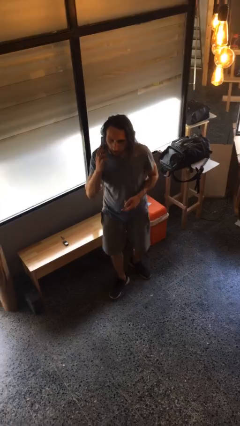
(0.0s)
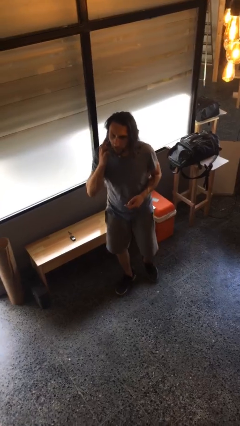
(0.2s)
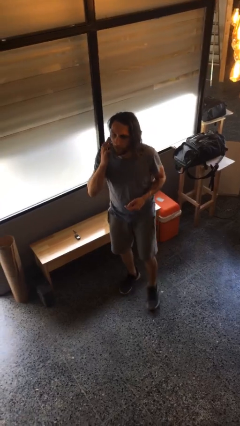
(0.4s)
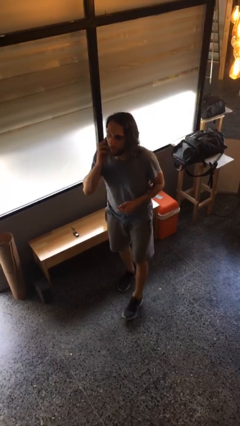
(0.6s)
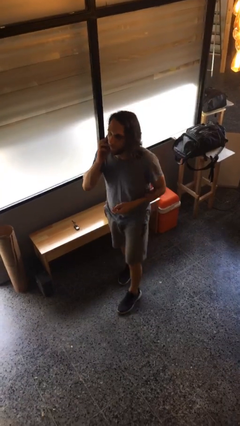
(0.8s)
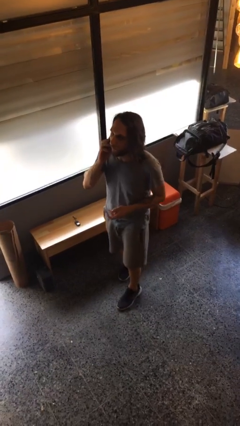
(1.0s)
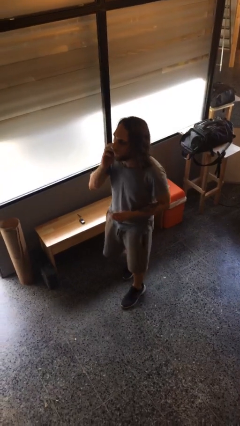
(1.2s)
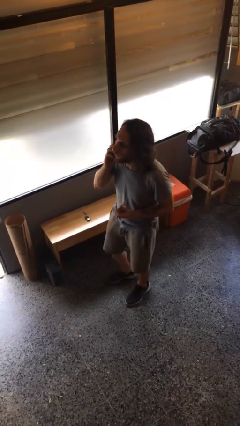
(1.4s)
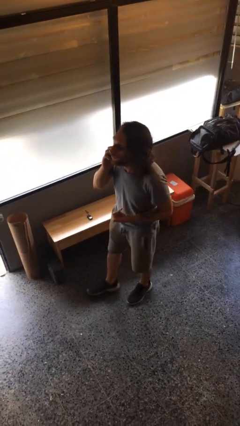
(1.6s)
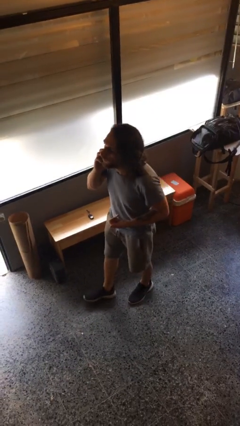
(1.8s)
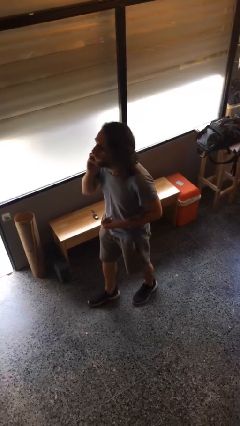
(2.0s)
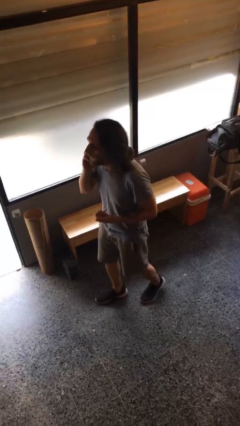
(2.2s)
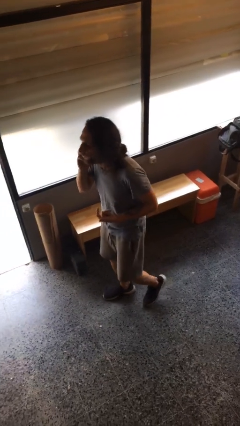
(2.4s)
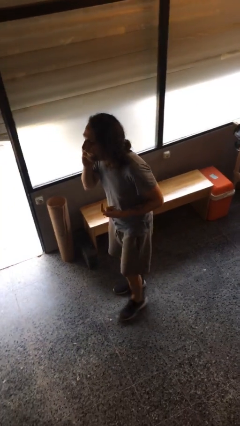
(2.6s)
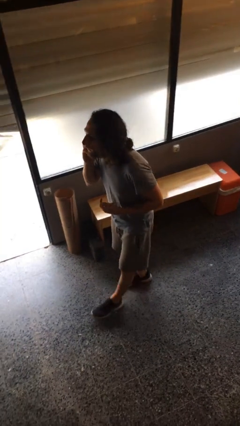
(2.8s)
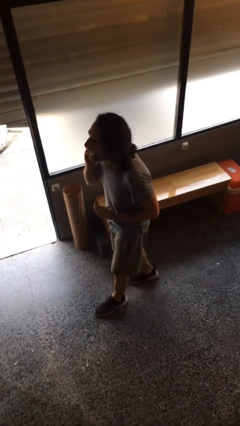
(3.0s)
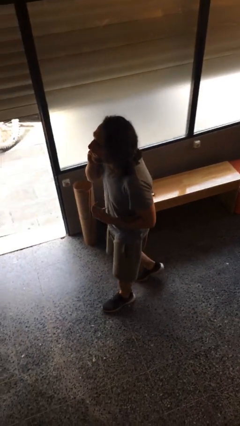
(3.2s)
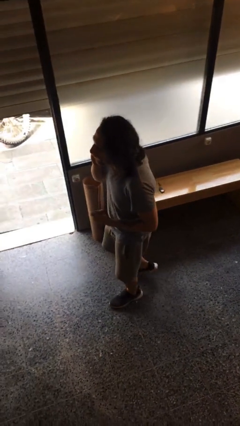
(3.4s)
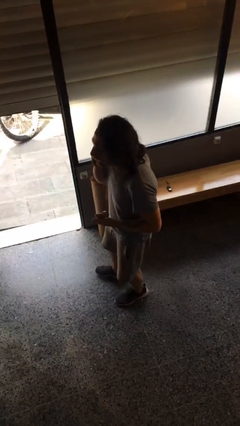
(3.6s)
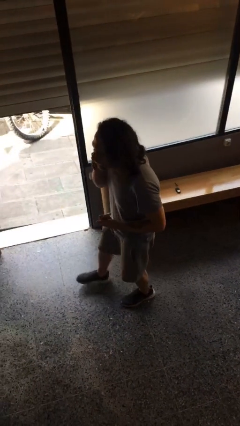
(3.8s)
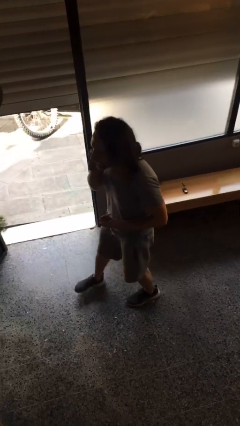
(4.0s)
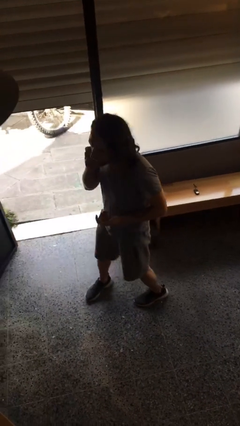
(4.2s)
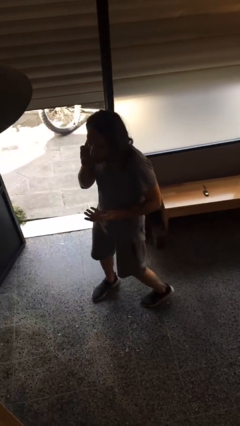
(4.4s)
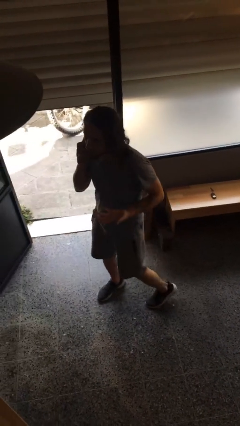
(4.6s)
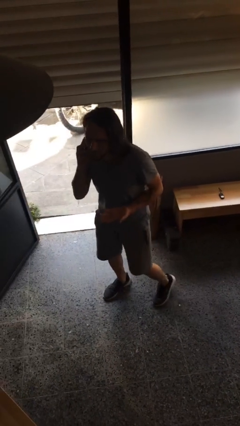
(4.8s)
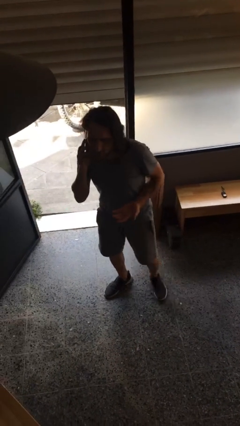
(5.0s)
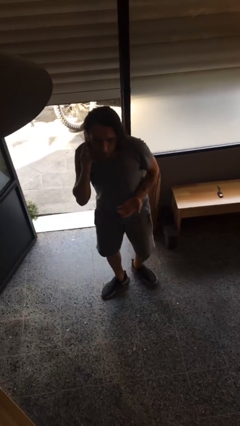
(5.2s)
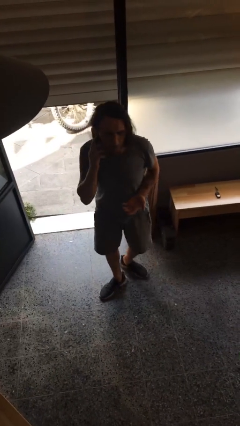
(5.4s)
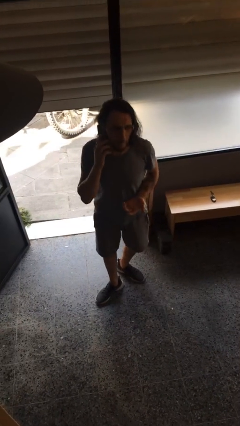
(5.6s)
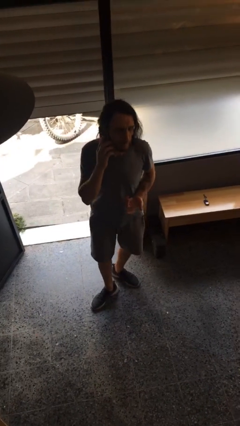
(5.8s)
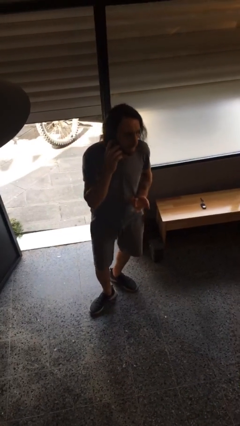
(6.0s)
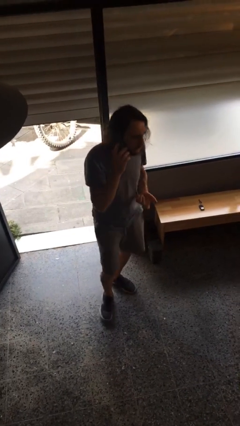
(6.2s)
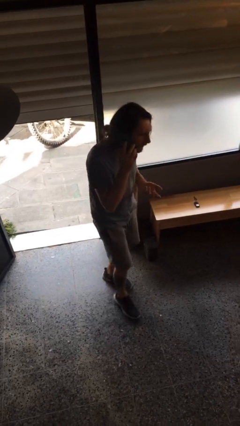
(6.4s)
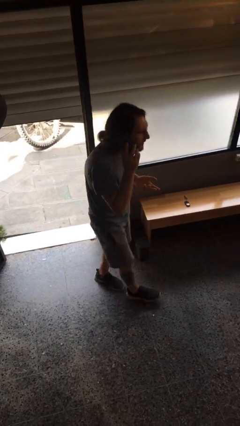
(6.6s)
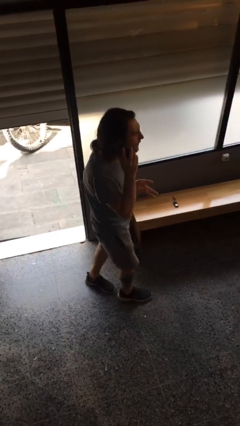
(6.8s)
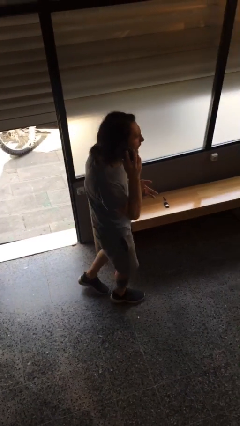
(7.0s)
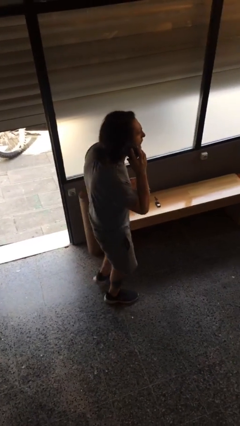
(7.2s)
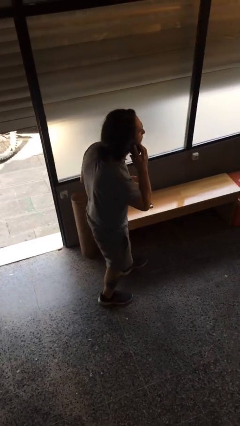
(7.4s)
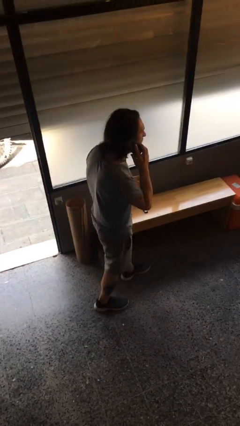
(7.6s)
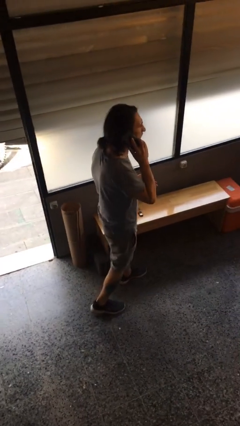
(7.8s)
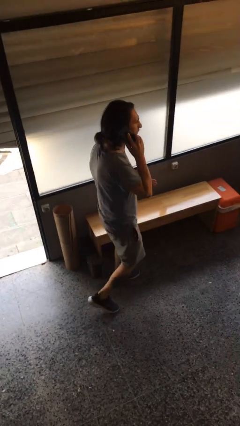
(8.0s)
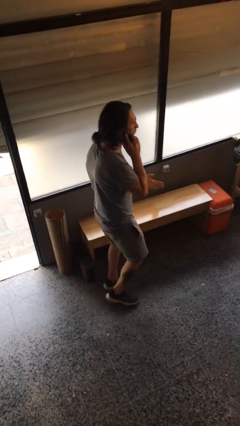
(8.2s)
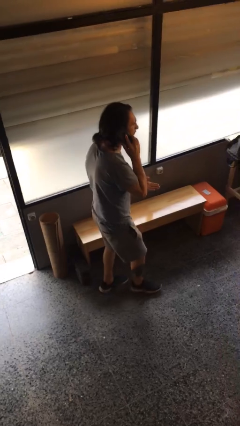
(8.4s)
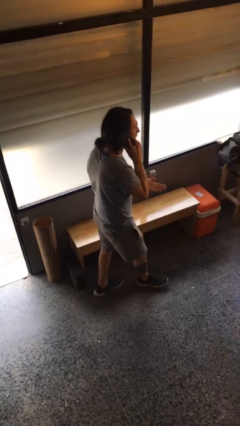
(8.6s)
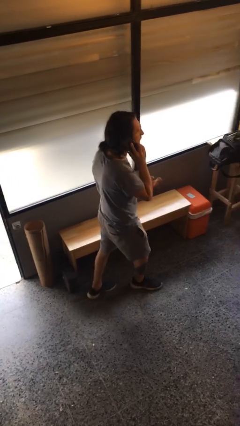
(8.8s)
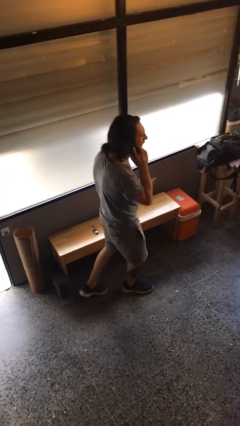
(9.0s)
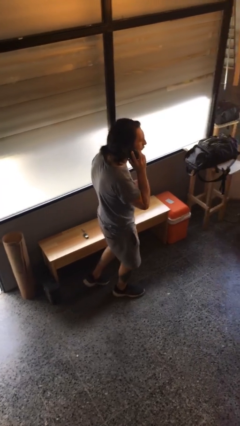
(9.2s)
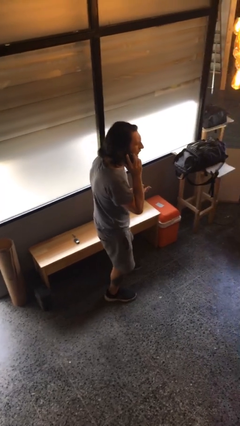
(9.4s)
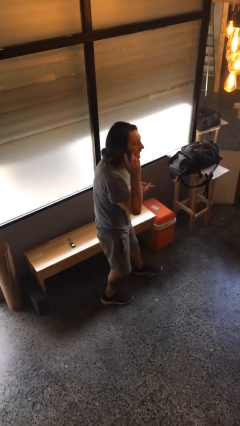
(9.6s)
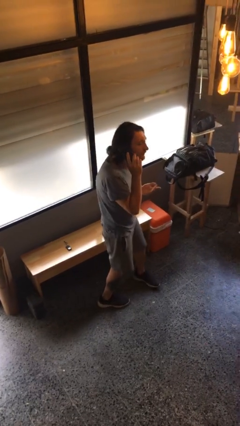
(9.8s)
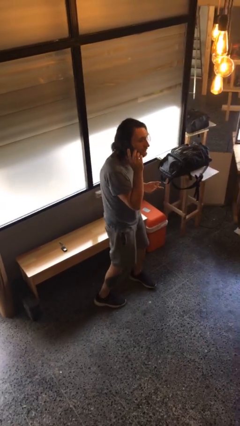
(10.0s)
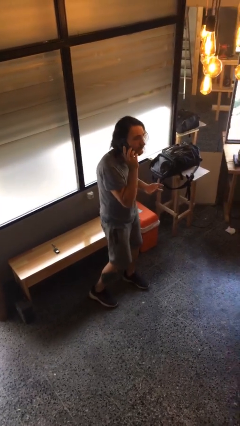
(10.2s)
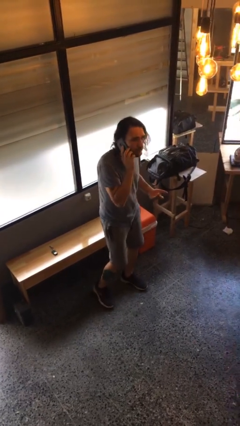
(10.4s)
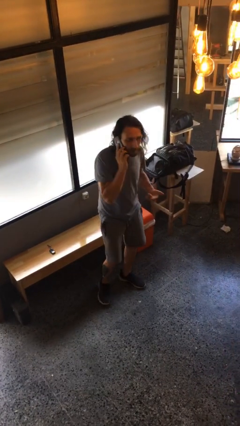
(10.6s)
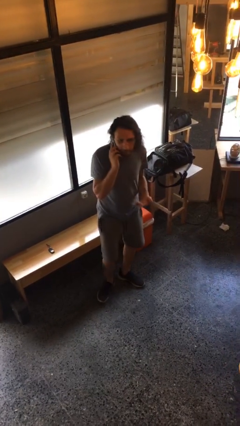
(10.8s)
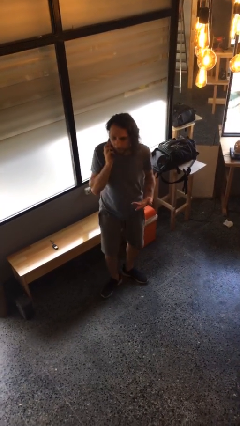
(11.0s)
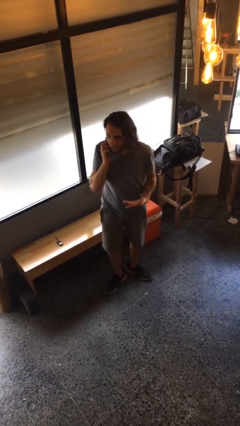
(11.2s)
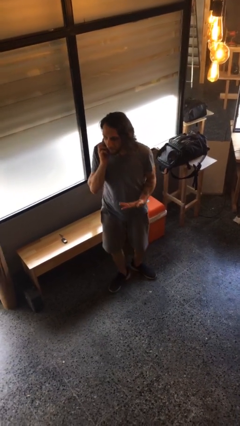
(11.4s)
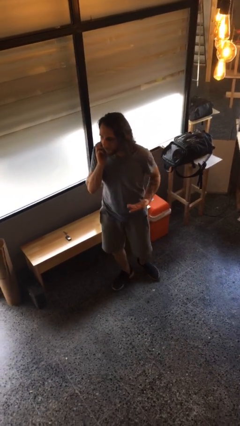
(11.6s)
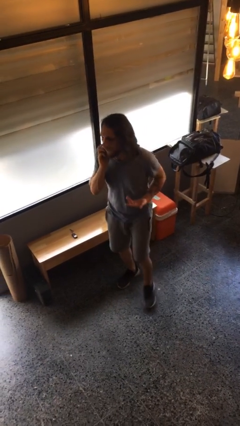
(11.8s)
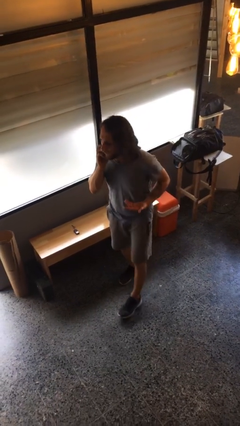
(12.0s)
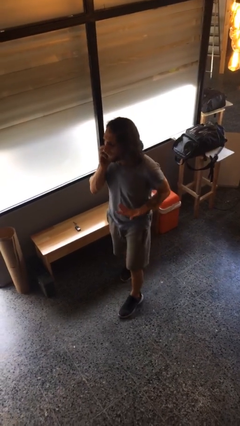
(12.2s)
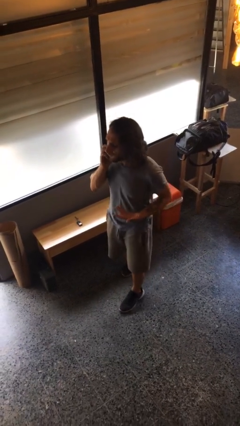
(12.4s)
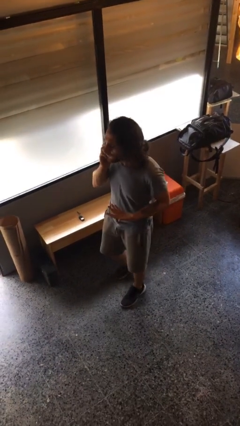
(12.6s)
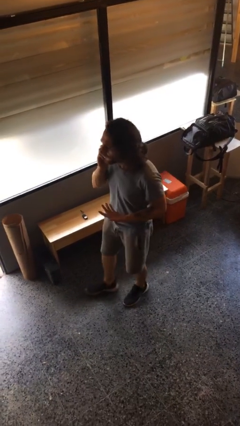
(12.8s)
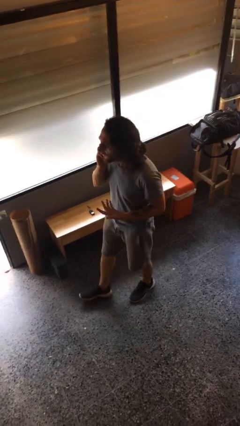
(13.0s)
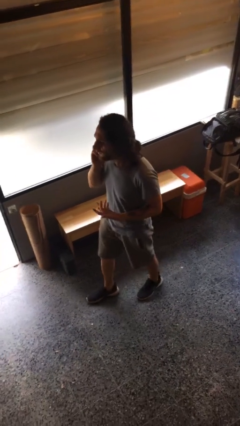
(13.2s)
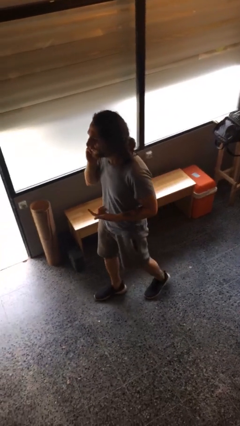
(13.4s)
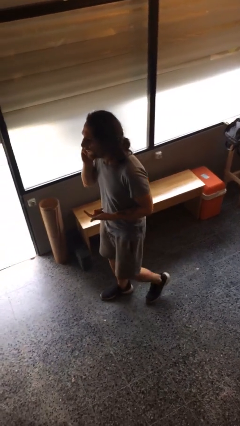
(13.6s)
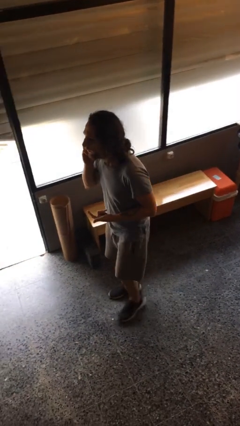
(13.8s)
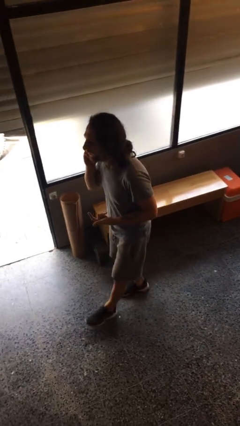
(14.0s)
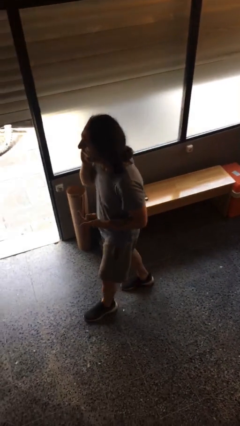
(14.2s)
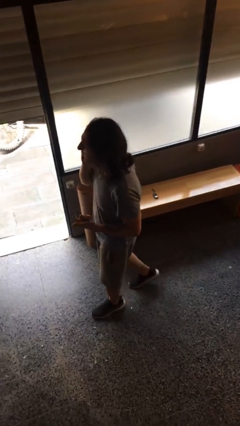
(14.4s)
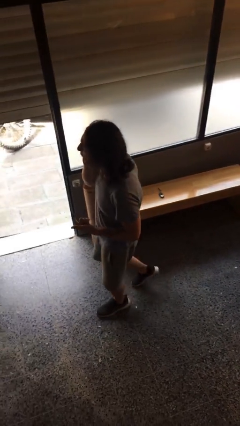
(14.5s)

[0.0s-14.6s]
person talks on phone

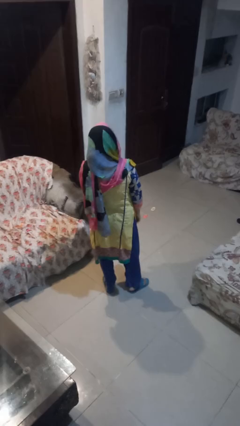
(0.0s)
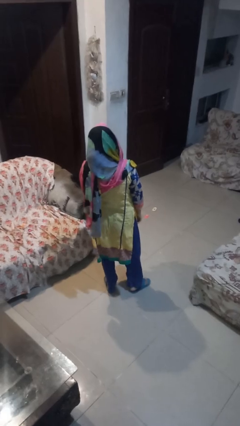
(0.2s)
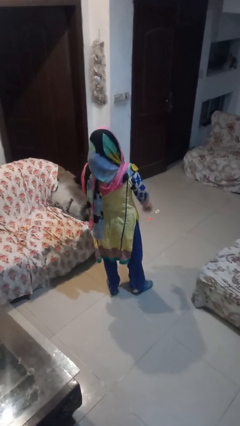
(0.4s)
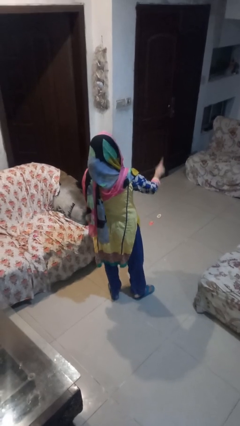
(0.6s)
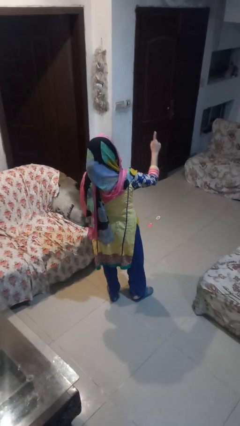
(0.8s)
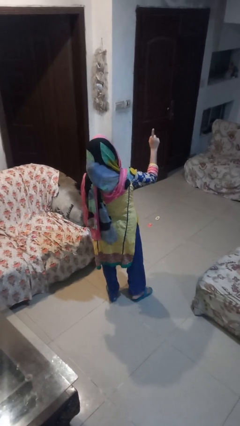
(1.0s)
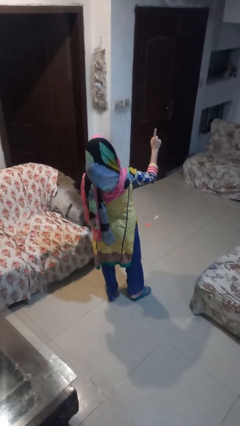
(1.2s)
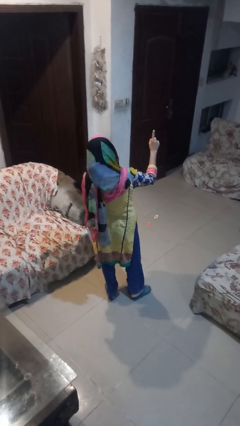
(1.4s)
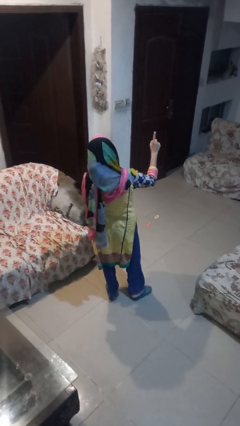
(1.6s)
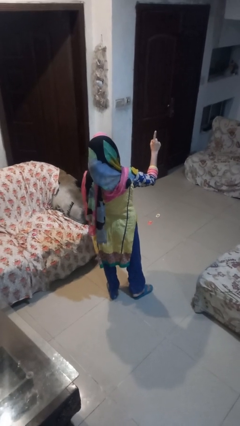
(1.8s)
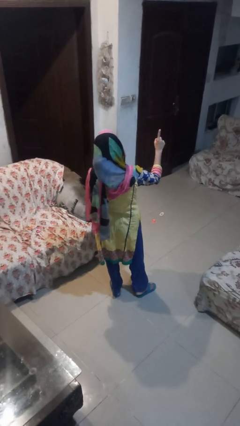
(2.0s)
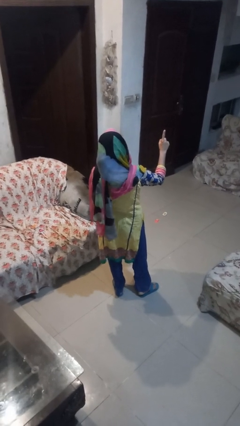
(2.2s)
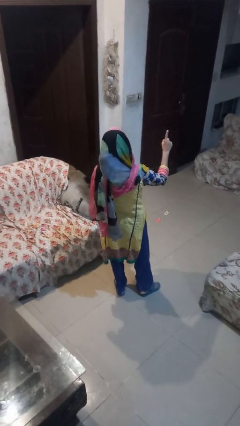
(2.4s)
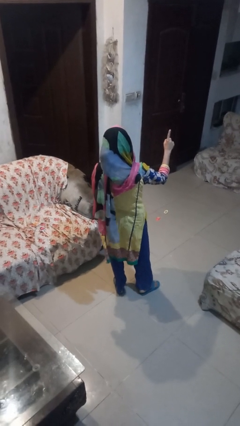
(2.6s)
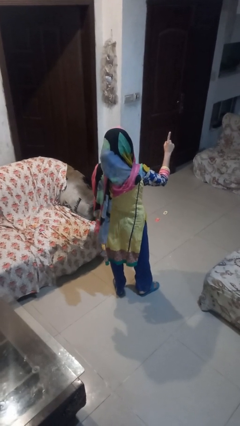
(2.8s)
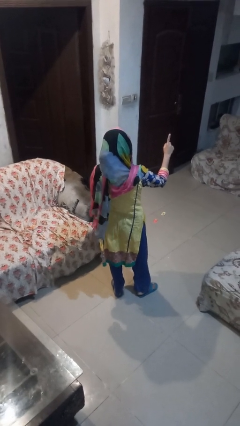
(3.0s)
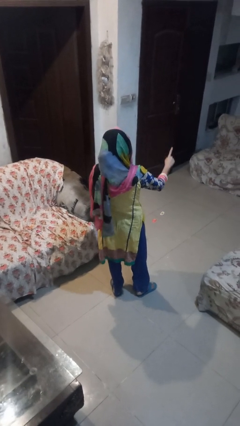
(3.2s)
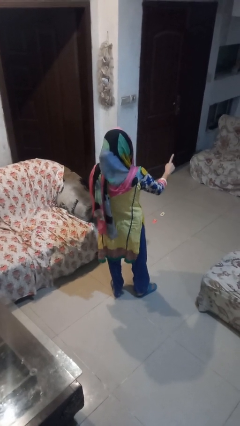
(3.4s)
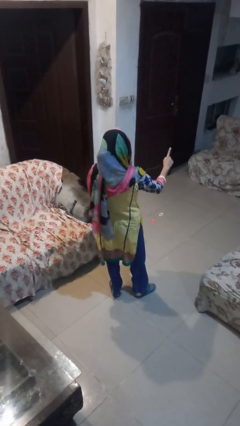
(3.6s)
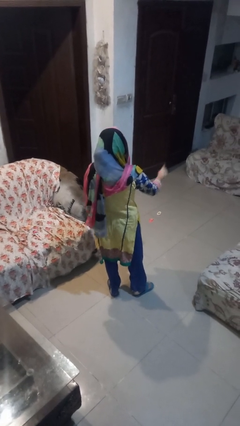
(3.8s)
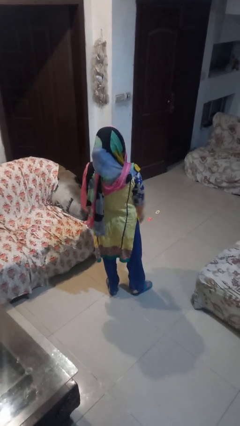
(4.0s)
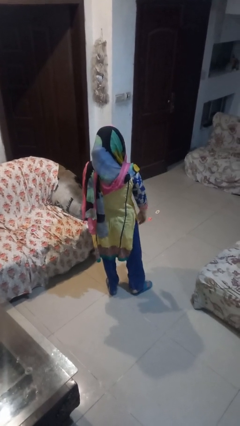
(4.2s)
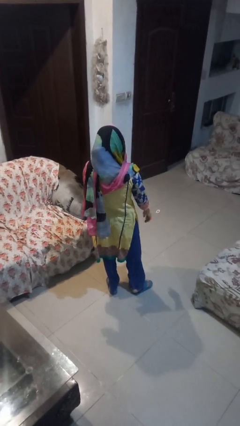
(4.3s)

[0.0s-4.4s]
person gestures number one
